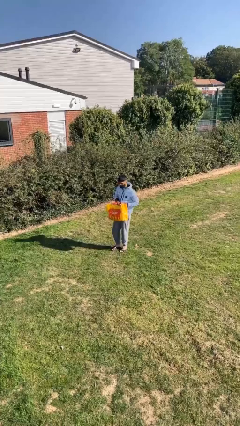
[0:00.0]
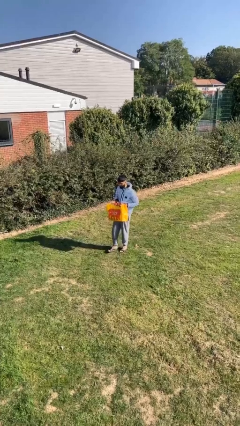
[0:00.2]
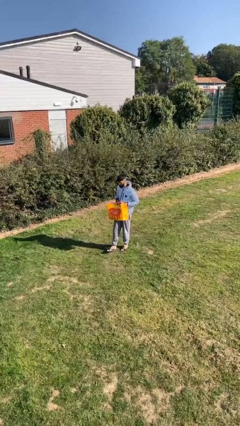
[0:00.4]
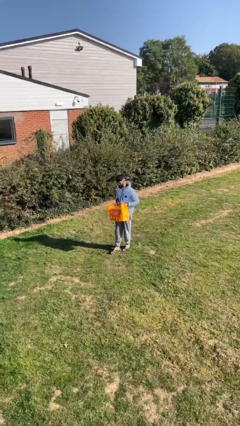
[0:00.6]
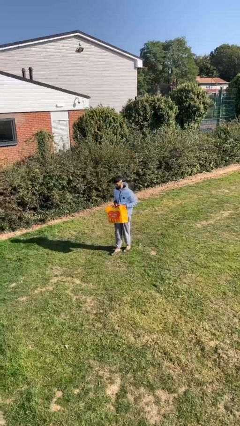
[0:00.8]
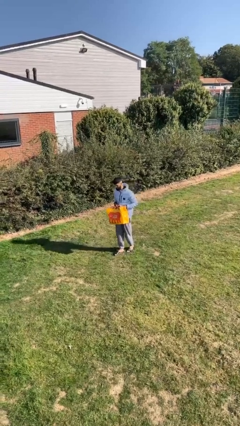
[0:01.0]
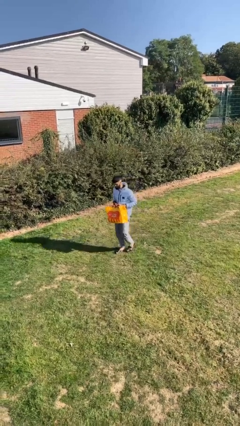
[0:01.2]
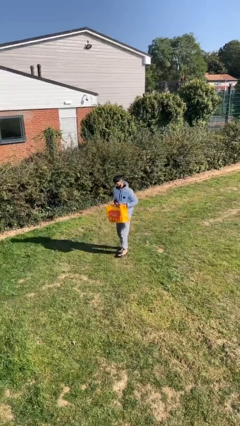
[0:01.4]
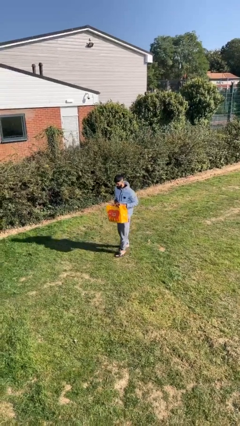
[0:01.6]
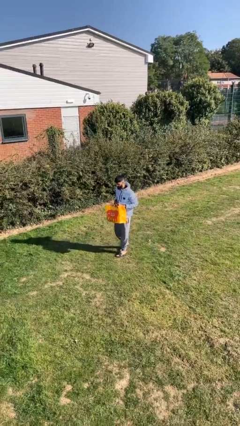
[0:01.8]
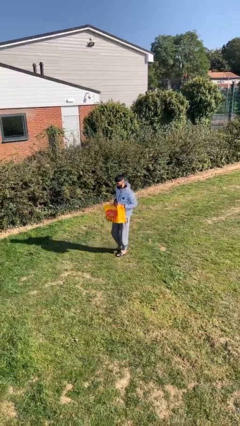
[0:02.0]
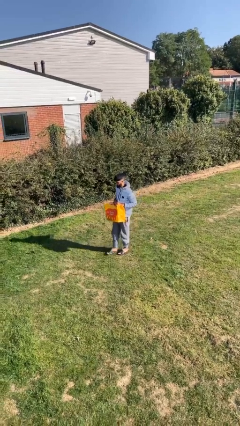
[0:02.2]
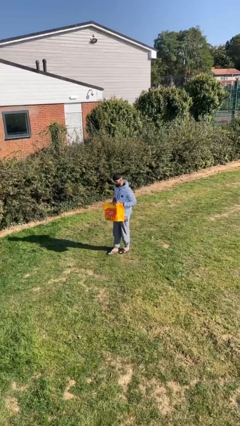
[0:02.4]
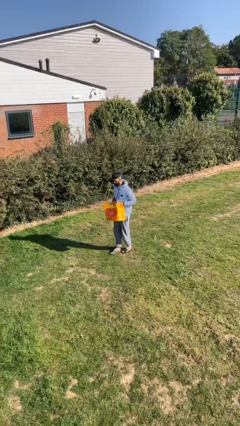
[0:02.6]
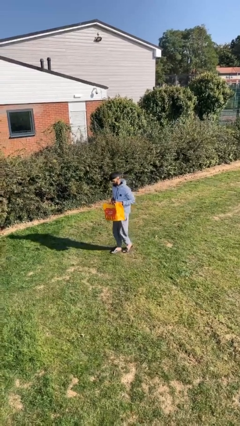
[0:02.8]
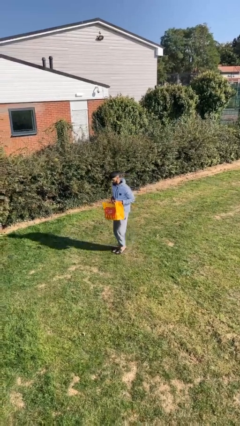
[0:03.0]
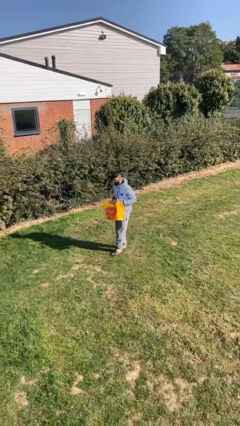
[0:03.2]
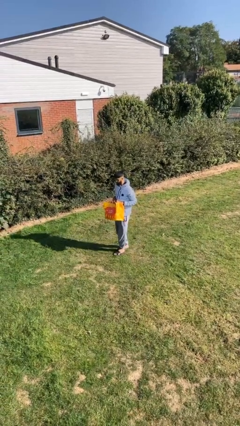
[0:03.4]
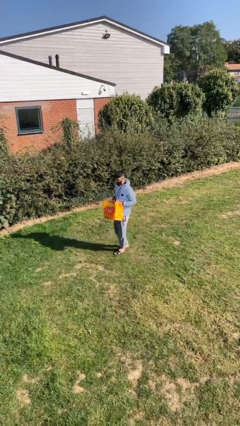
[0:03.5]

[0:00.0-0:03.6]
person carries heavy object

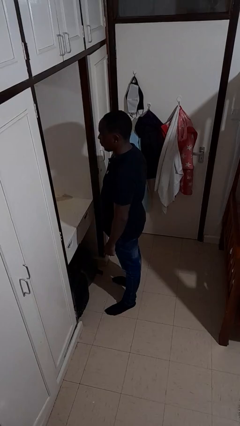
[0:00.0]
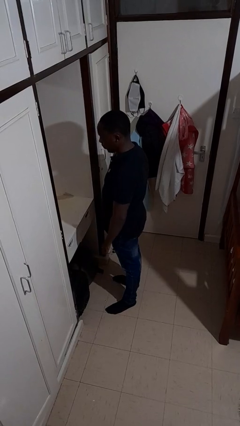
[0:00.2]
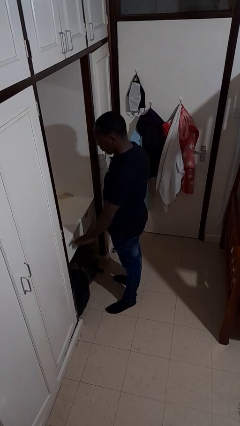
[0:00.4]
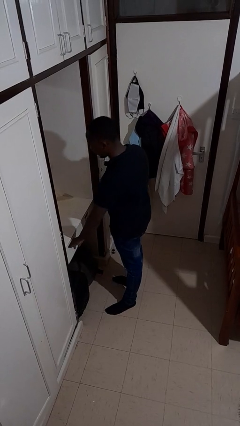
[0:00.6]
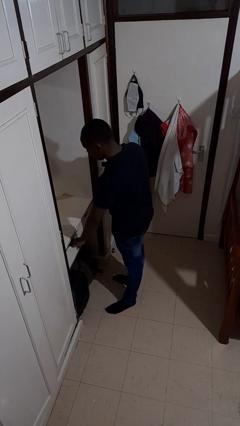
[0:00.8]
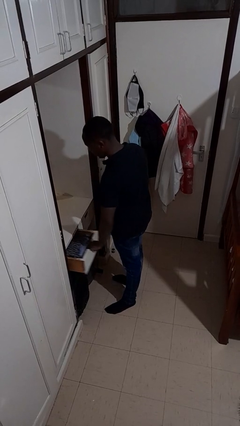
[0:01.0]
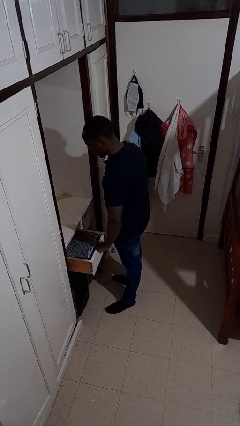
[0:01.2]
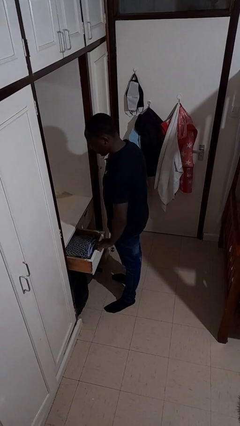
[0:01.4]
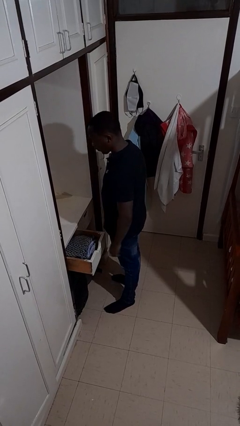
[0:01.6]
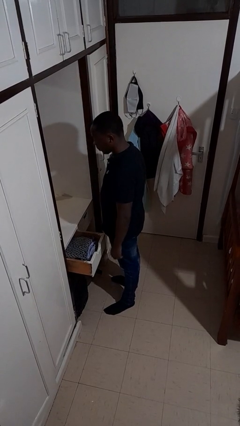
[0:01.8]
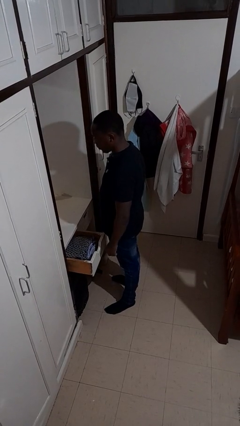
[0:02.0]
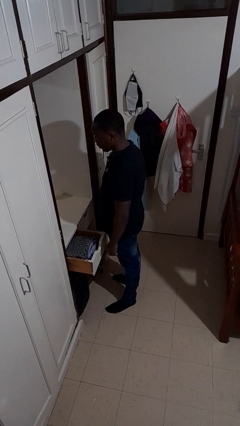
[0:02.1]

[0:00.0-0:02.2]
person opens dresser drawer

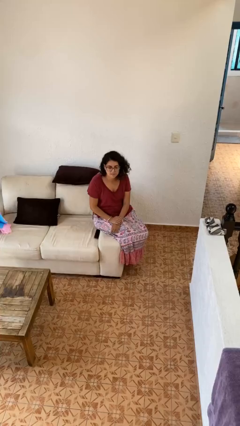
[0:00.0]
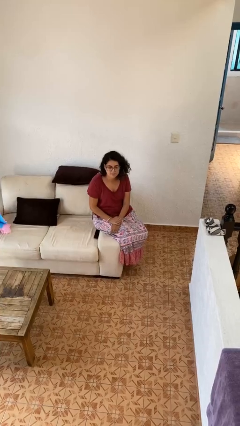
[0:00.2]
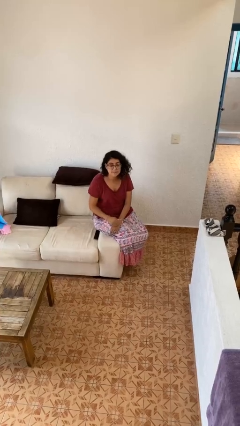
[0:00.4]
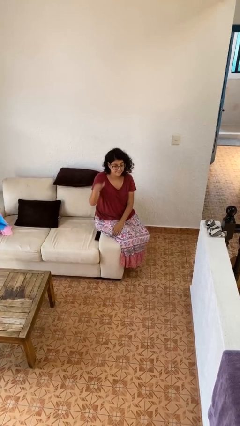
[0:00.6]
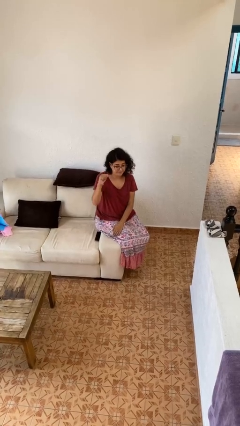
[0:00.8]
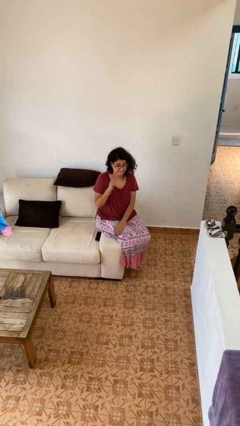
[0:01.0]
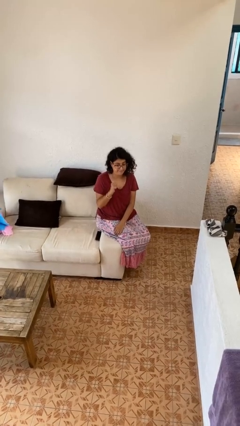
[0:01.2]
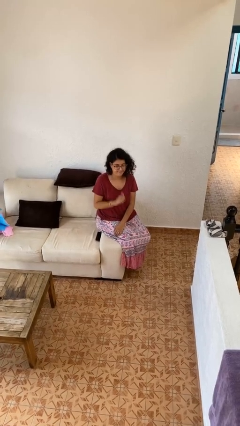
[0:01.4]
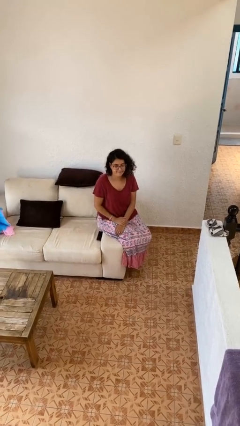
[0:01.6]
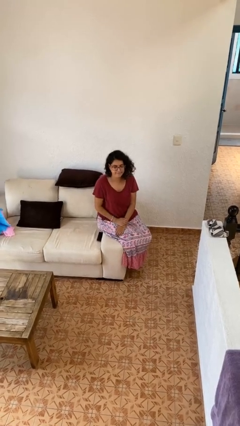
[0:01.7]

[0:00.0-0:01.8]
person gestures behind me

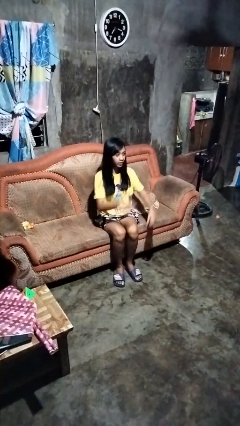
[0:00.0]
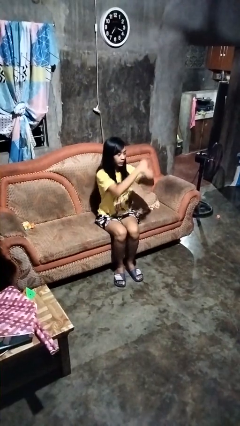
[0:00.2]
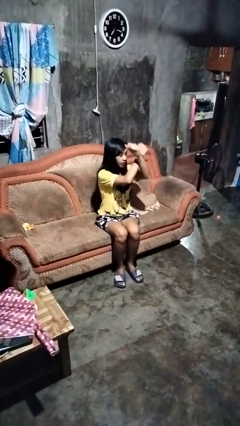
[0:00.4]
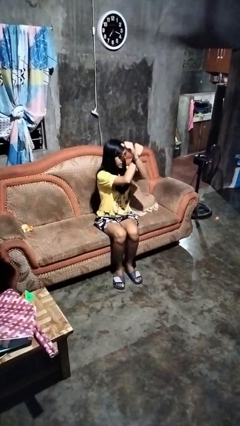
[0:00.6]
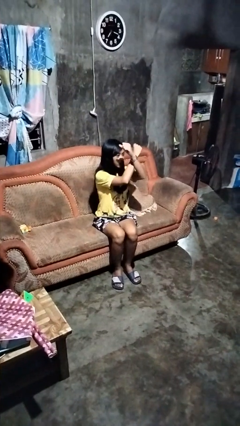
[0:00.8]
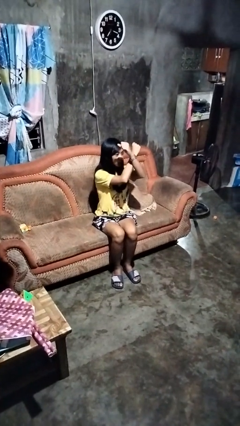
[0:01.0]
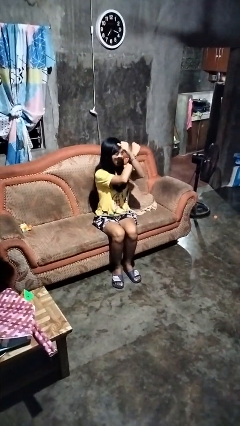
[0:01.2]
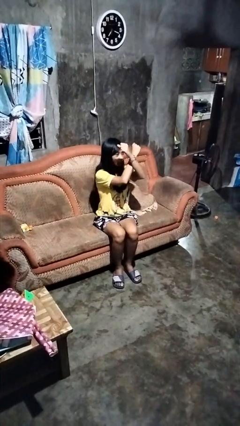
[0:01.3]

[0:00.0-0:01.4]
person gestures arms x

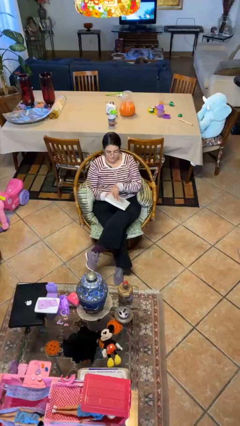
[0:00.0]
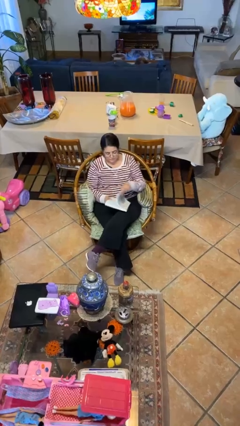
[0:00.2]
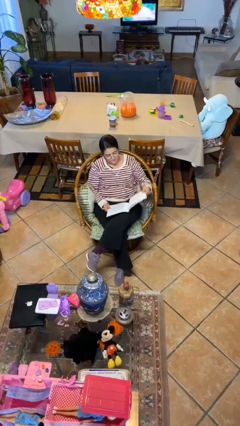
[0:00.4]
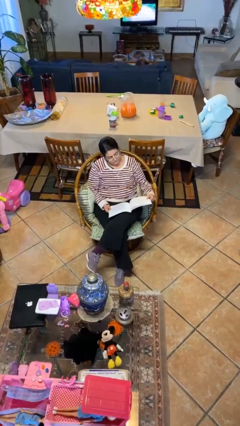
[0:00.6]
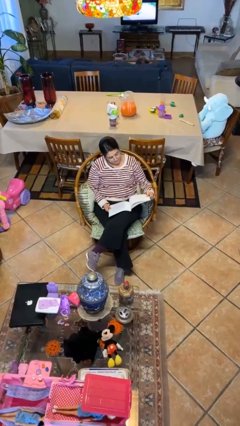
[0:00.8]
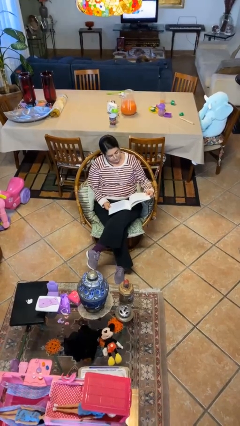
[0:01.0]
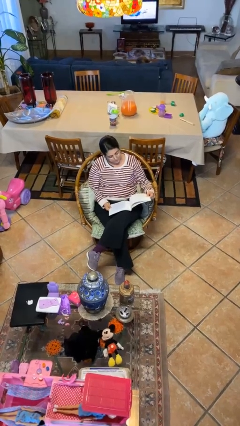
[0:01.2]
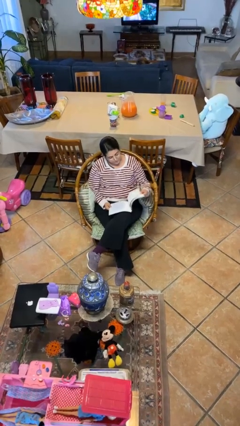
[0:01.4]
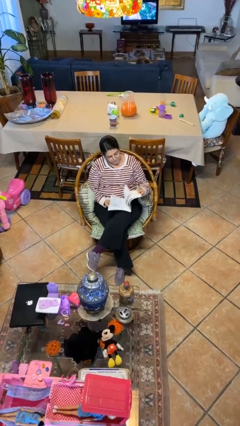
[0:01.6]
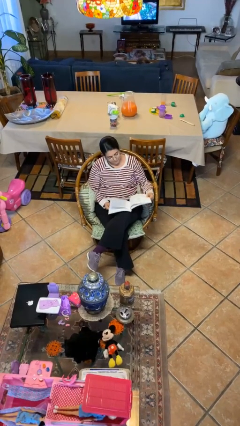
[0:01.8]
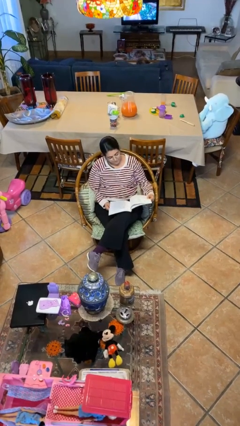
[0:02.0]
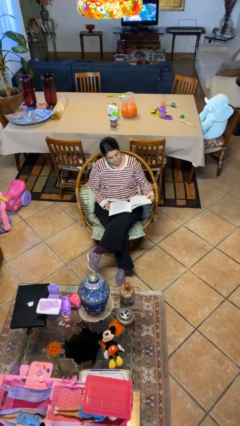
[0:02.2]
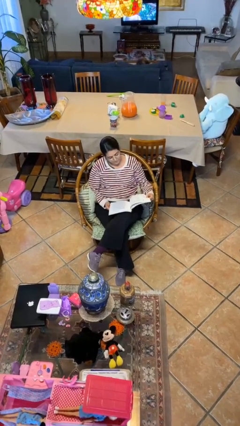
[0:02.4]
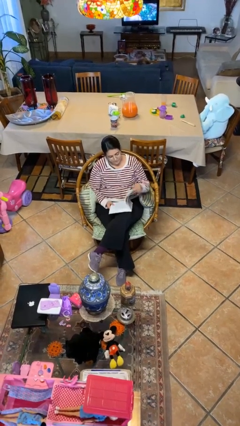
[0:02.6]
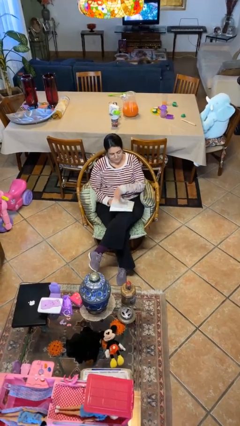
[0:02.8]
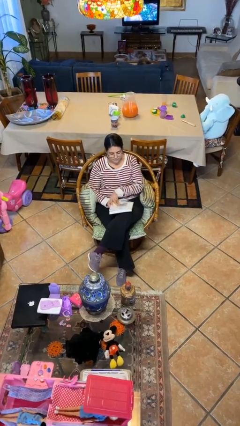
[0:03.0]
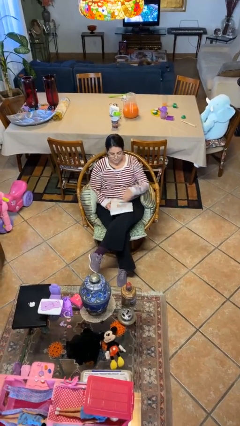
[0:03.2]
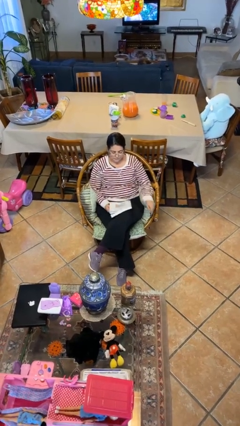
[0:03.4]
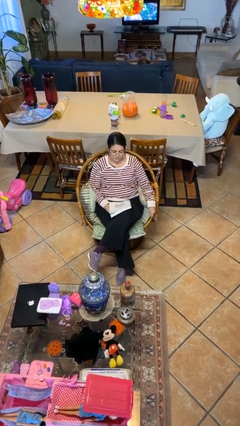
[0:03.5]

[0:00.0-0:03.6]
person reads document

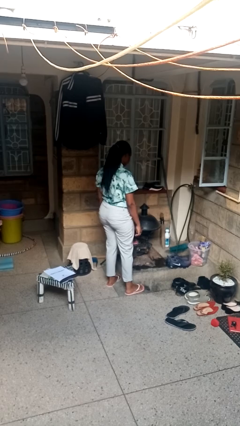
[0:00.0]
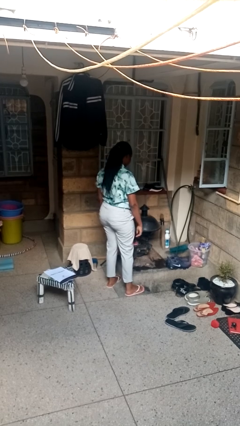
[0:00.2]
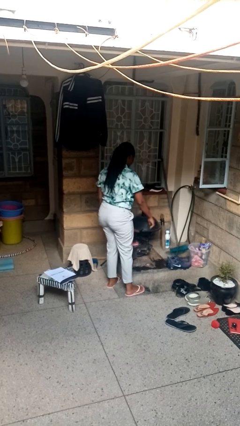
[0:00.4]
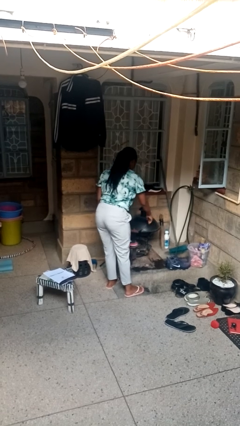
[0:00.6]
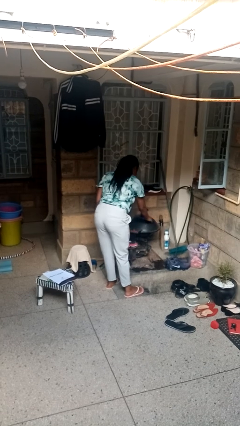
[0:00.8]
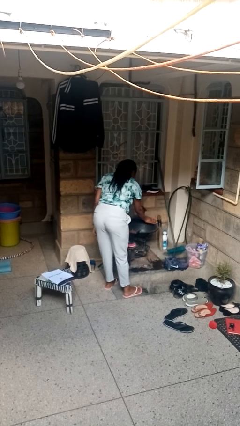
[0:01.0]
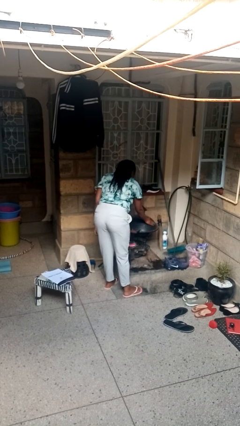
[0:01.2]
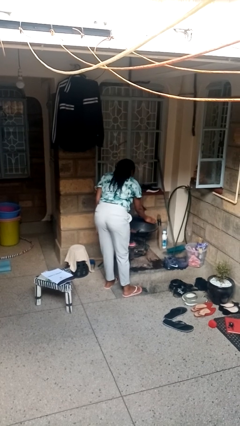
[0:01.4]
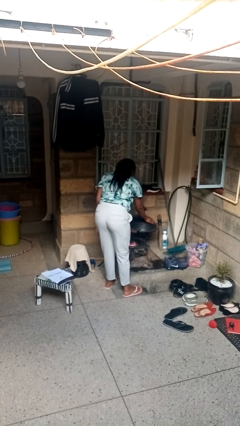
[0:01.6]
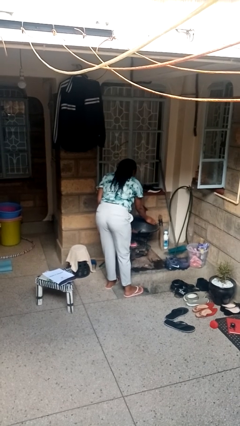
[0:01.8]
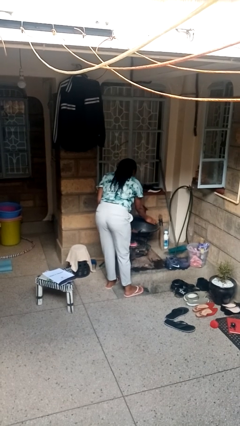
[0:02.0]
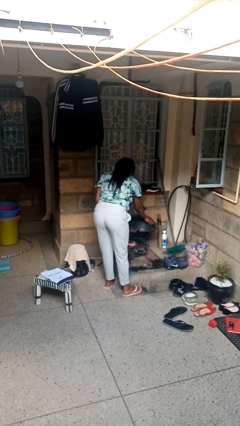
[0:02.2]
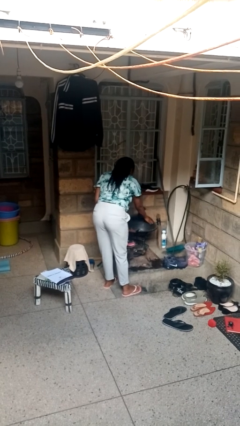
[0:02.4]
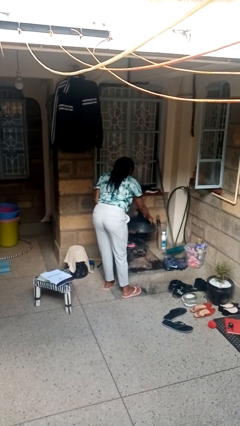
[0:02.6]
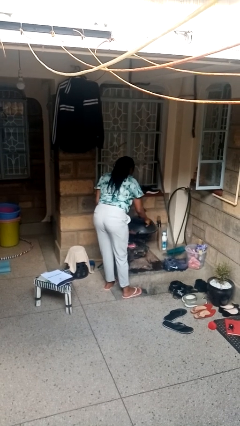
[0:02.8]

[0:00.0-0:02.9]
person taps object with finger

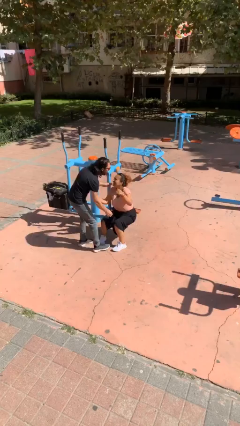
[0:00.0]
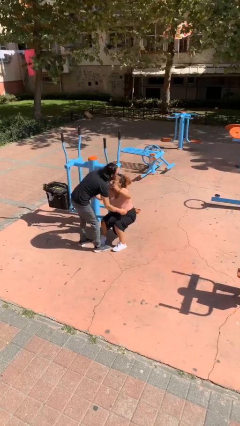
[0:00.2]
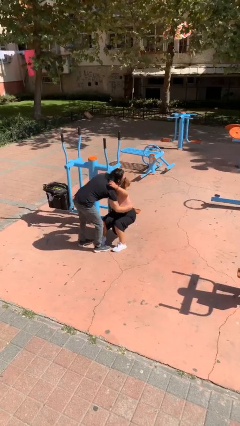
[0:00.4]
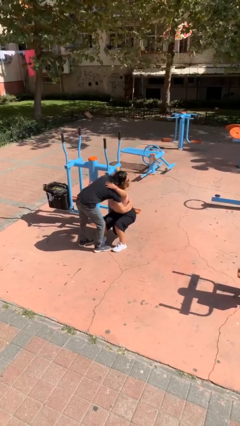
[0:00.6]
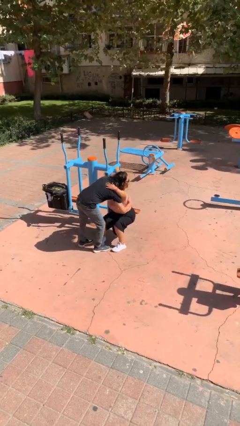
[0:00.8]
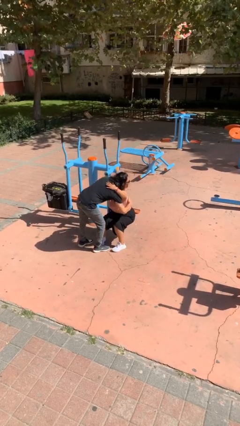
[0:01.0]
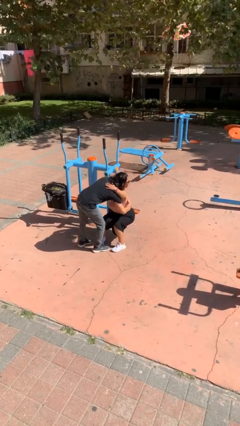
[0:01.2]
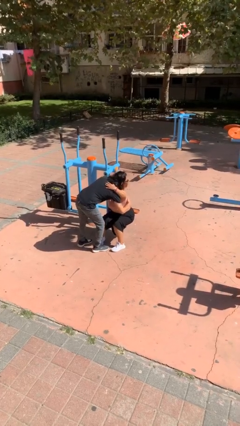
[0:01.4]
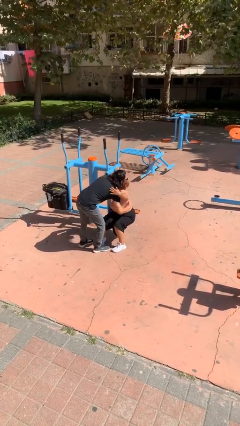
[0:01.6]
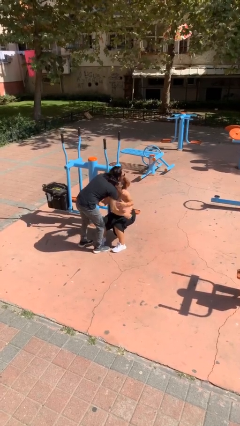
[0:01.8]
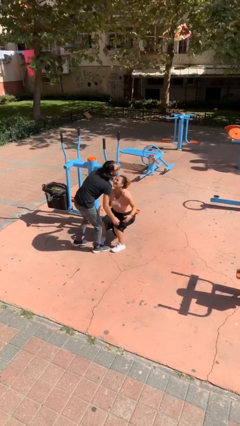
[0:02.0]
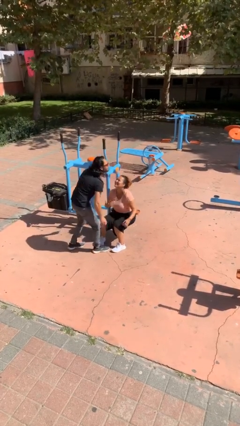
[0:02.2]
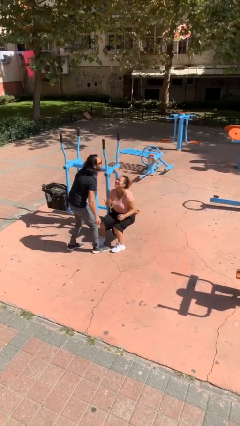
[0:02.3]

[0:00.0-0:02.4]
person embraces person
